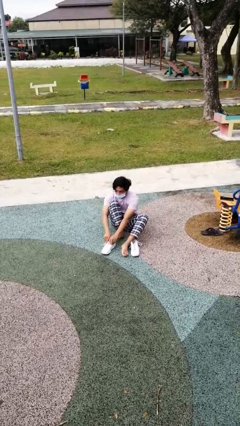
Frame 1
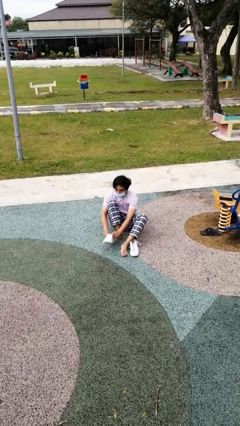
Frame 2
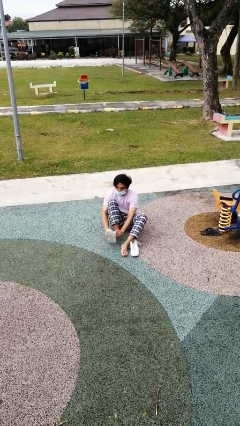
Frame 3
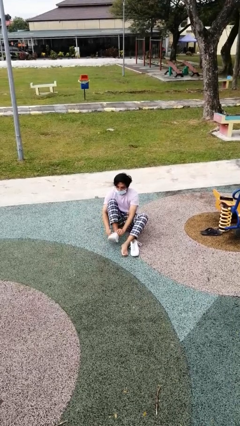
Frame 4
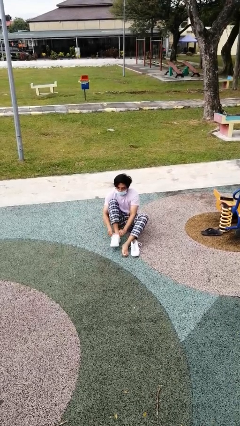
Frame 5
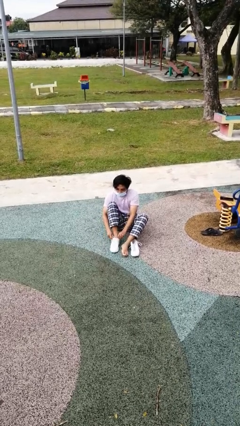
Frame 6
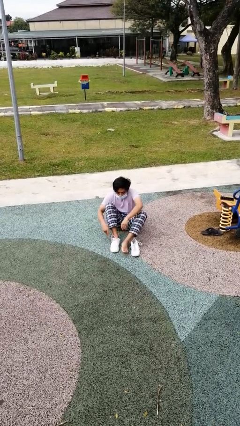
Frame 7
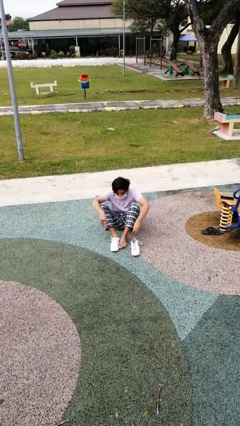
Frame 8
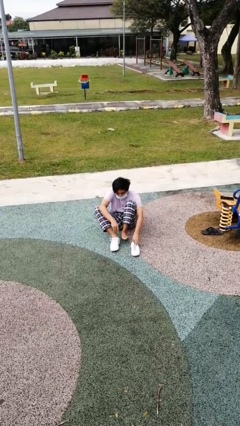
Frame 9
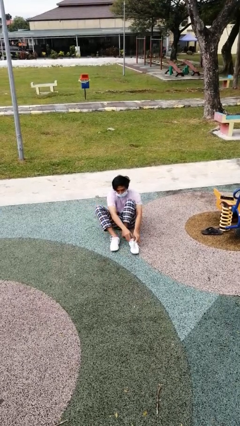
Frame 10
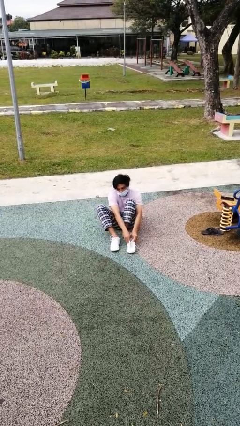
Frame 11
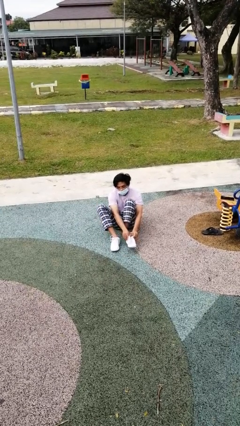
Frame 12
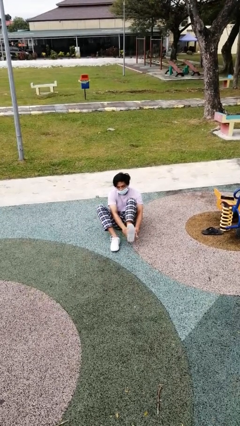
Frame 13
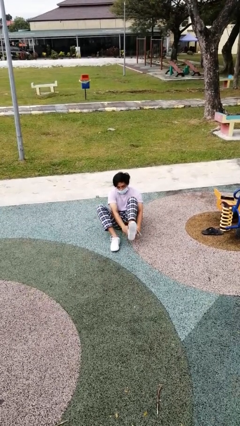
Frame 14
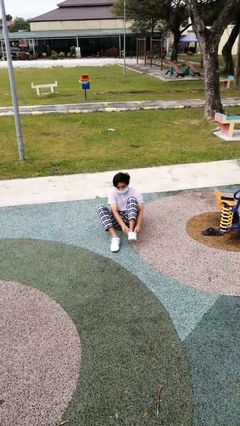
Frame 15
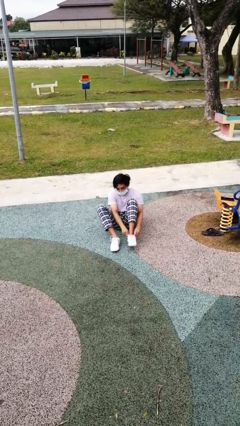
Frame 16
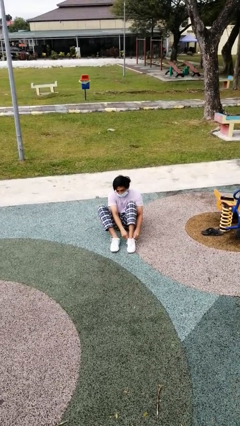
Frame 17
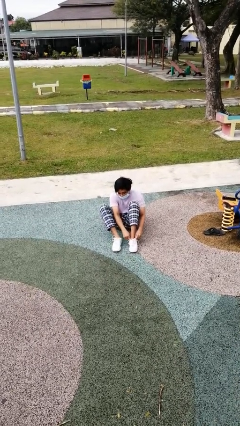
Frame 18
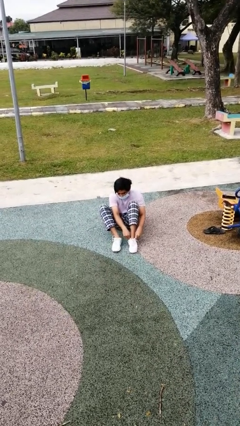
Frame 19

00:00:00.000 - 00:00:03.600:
person puts on shoes

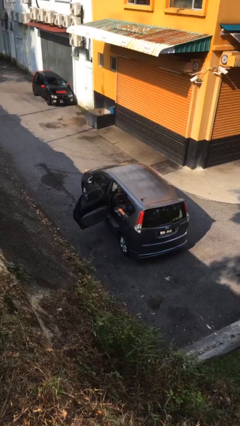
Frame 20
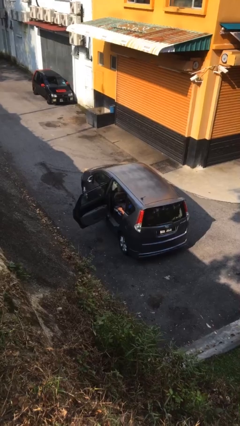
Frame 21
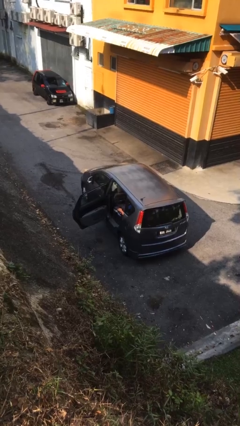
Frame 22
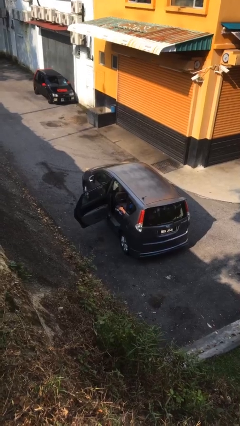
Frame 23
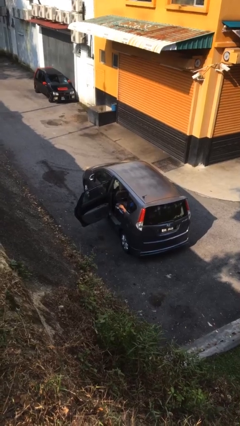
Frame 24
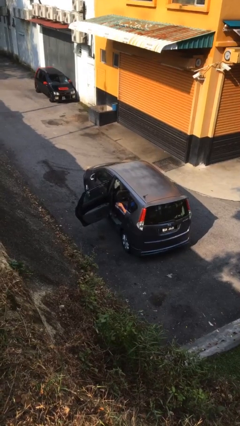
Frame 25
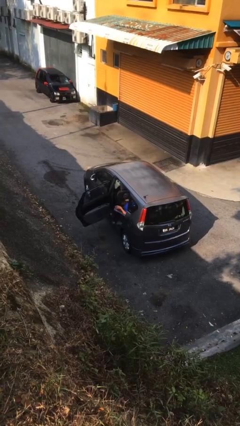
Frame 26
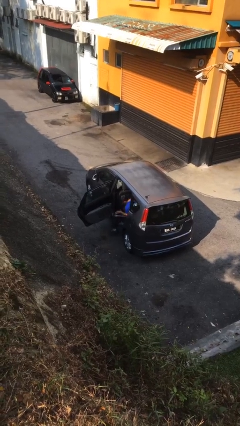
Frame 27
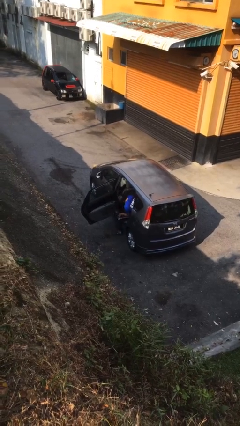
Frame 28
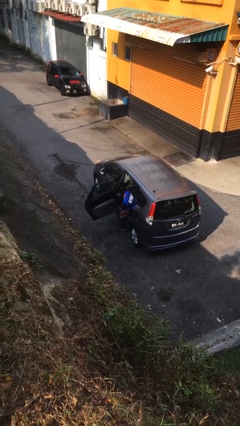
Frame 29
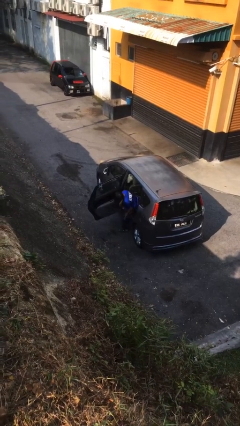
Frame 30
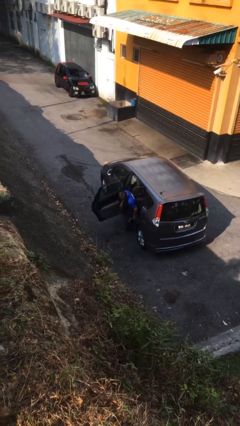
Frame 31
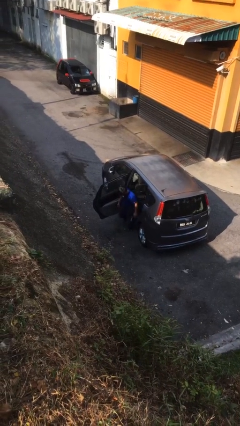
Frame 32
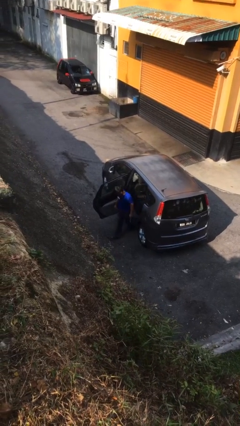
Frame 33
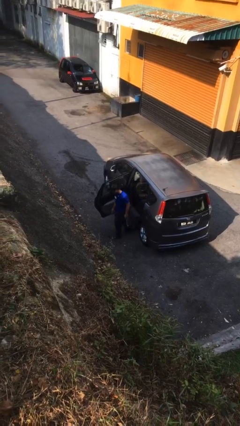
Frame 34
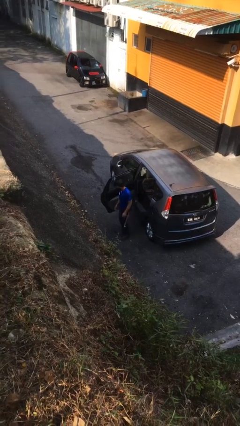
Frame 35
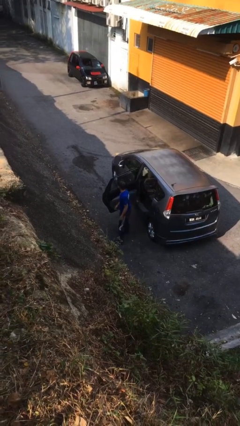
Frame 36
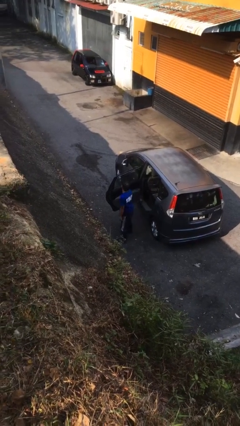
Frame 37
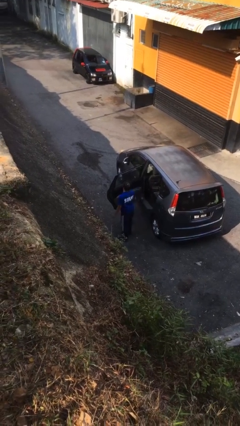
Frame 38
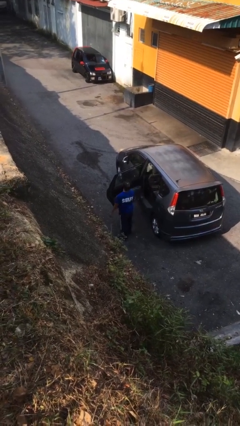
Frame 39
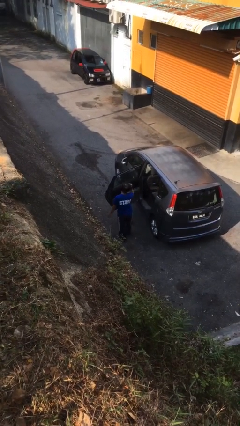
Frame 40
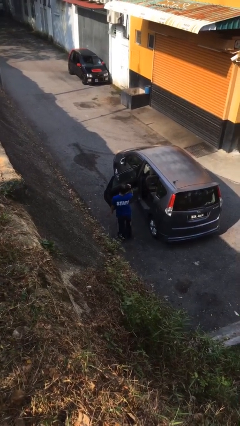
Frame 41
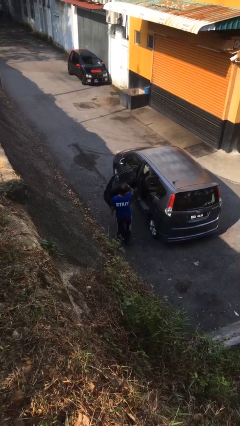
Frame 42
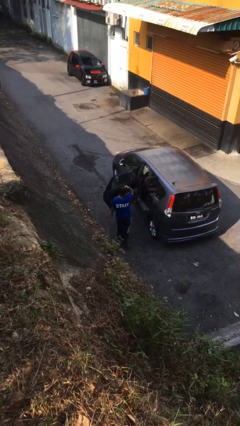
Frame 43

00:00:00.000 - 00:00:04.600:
person exits car

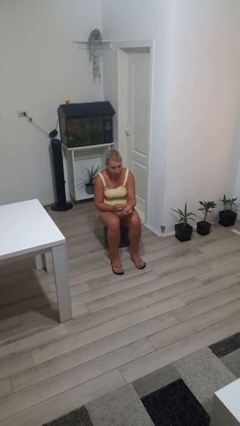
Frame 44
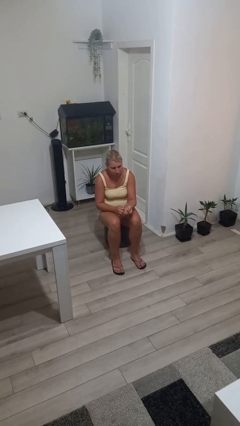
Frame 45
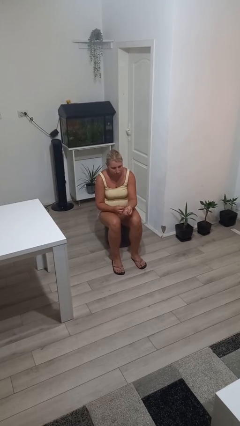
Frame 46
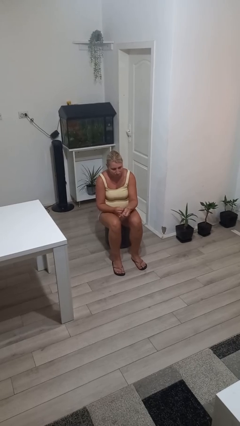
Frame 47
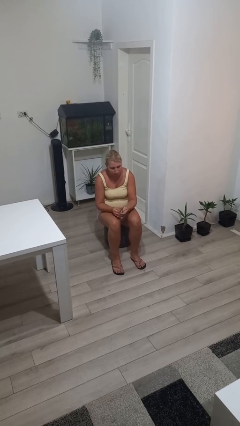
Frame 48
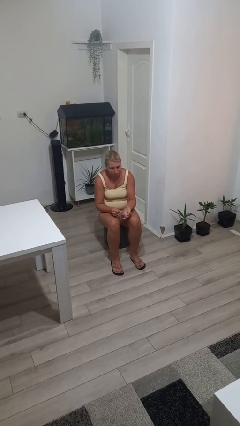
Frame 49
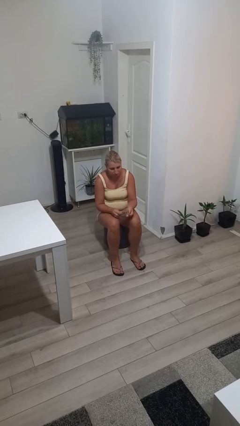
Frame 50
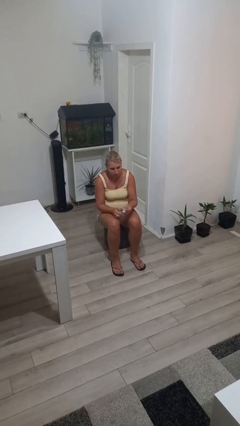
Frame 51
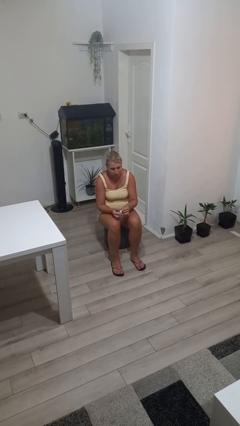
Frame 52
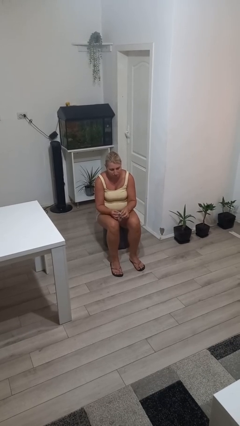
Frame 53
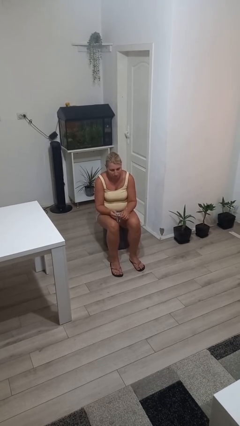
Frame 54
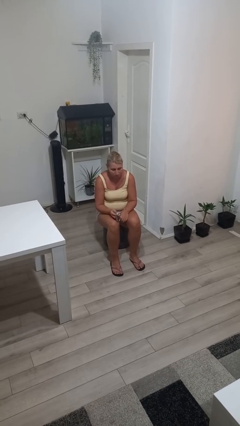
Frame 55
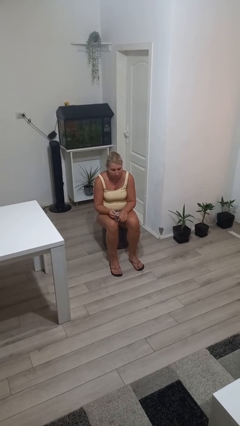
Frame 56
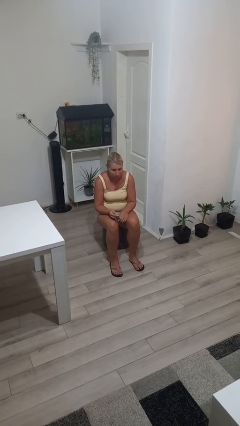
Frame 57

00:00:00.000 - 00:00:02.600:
person takes off wristwatch

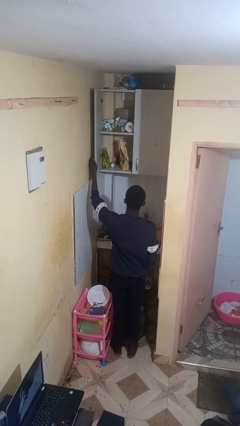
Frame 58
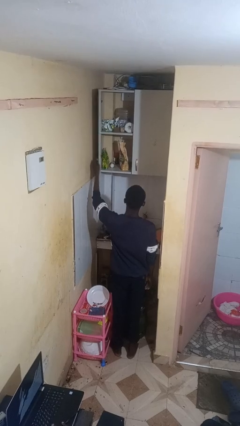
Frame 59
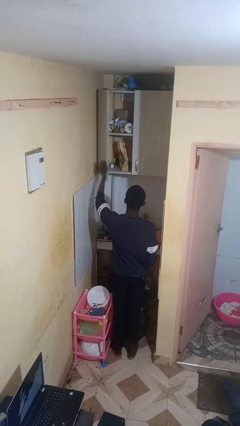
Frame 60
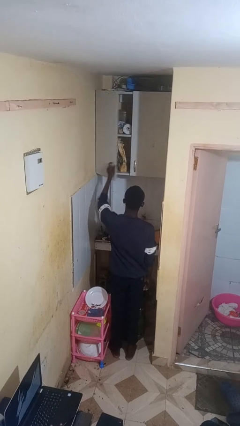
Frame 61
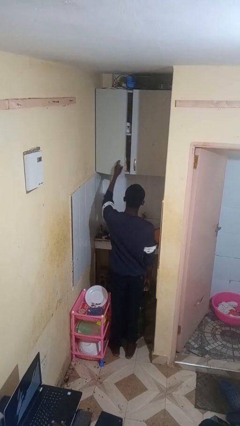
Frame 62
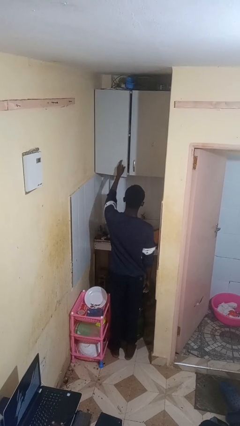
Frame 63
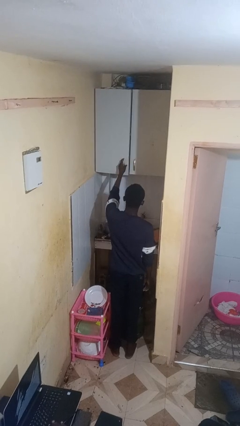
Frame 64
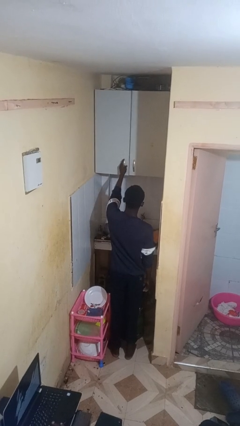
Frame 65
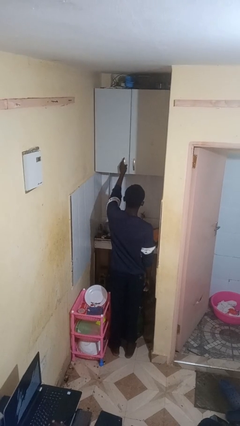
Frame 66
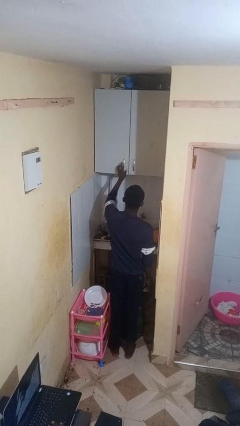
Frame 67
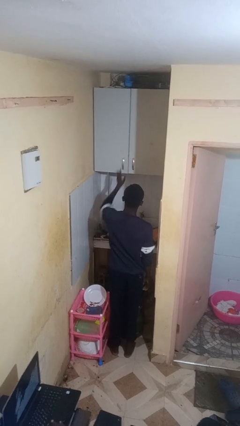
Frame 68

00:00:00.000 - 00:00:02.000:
person closes cabinet

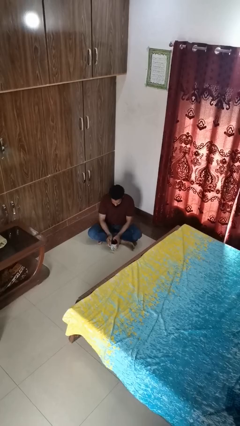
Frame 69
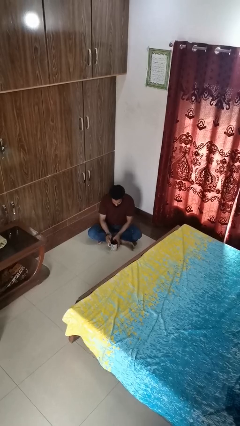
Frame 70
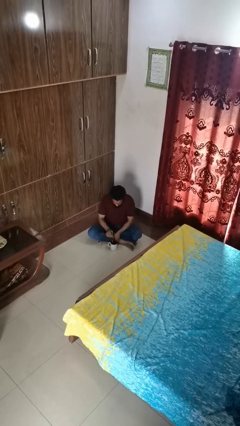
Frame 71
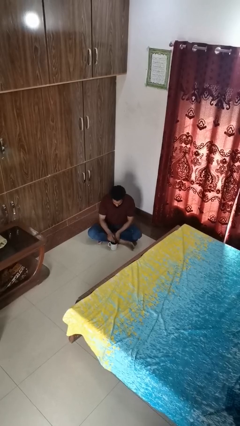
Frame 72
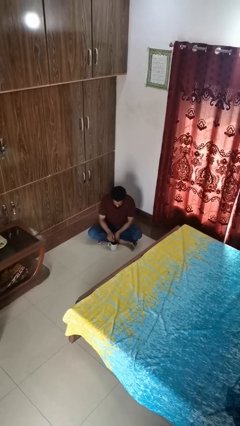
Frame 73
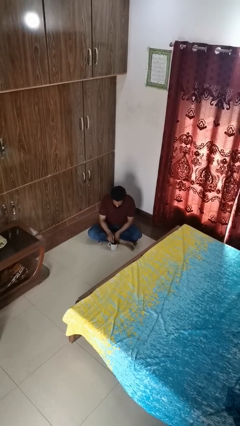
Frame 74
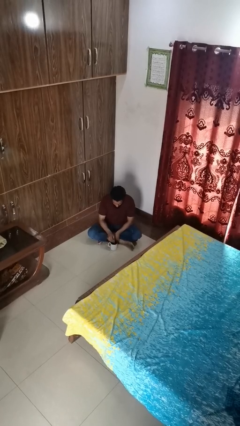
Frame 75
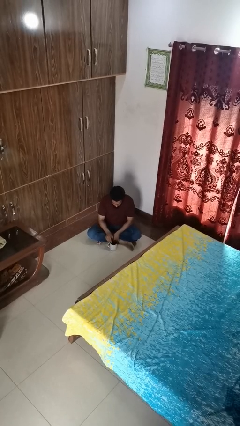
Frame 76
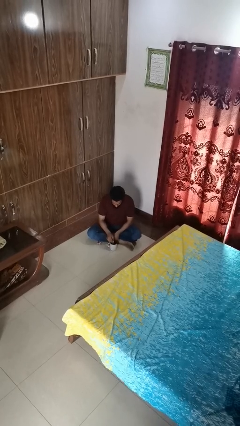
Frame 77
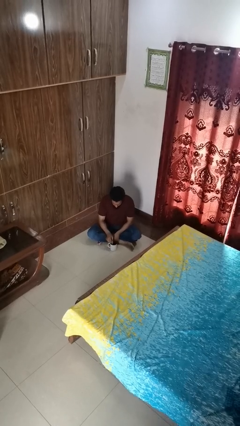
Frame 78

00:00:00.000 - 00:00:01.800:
person stirs mug

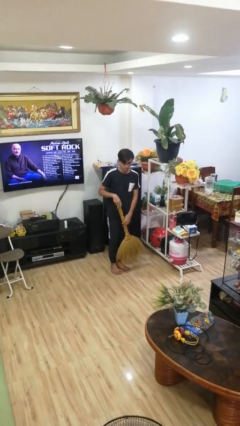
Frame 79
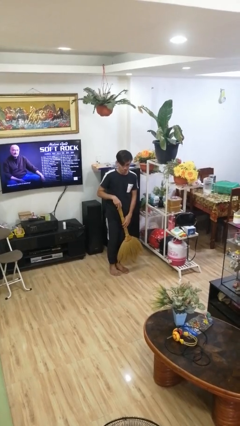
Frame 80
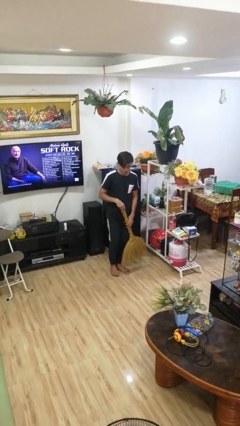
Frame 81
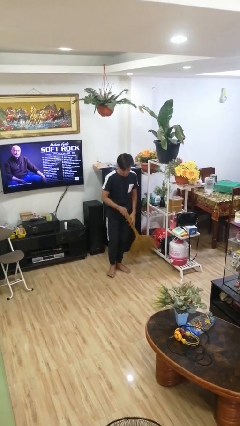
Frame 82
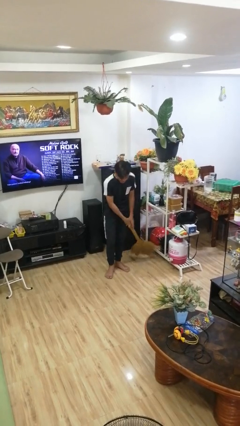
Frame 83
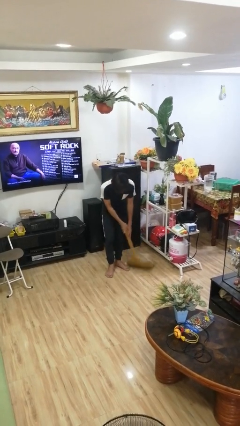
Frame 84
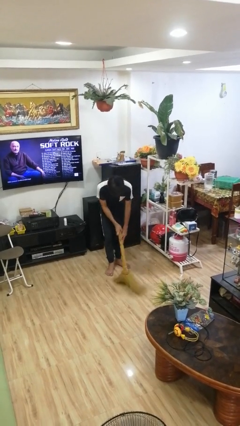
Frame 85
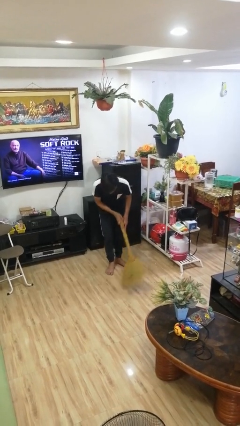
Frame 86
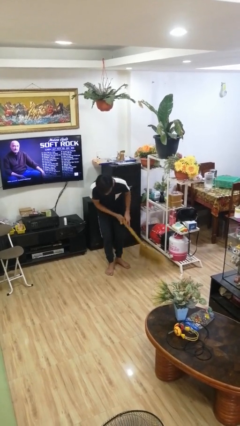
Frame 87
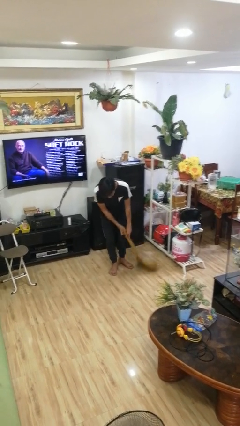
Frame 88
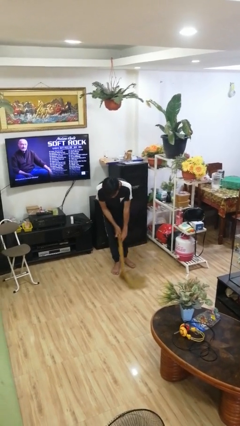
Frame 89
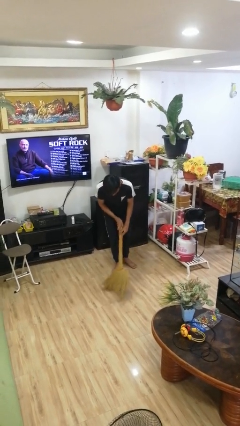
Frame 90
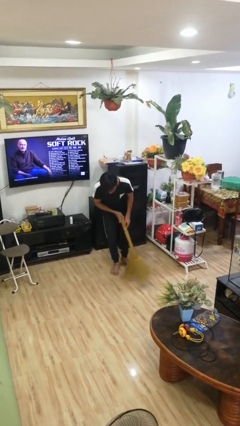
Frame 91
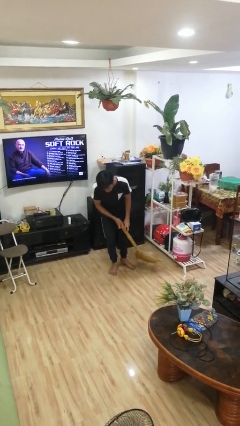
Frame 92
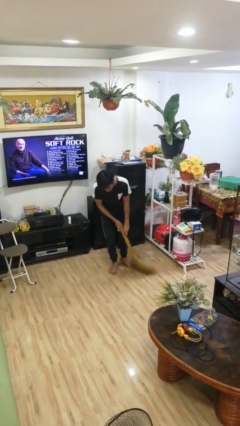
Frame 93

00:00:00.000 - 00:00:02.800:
person sweeps floor

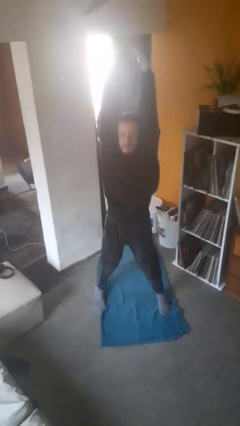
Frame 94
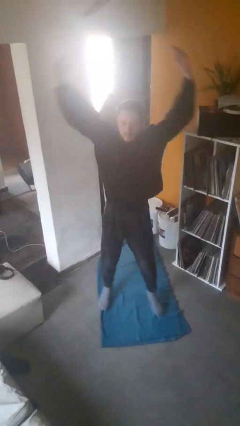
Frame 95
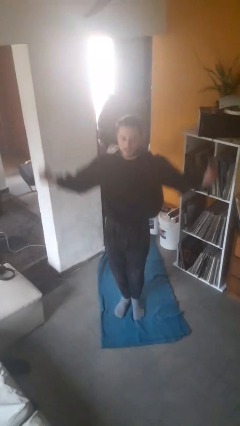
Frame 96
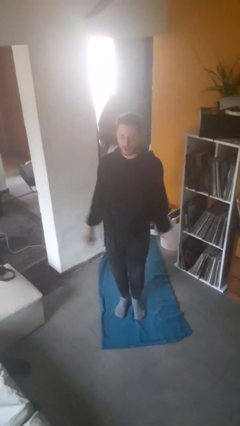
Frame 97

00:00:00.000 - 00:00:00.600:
person exercises with jumping jacks
